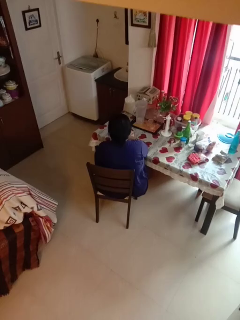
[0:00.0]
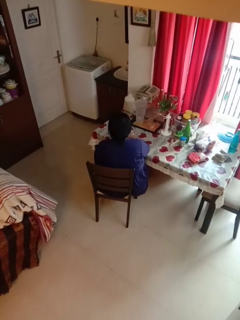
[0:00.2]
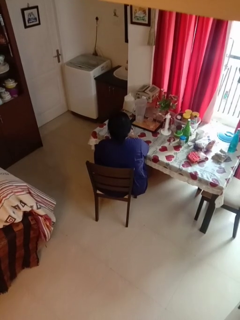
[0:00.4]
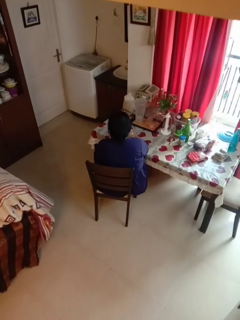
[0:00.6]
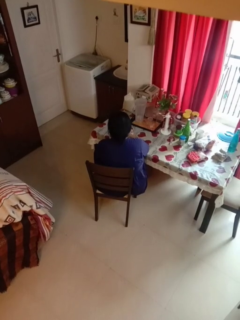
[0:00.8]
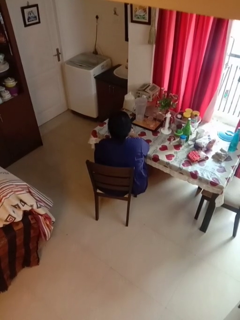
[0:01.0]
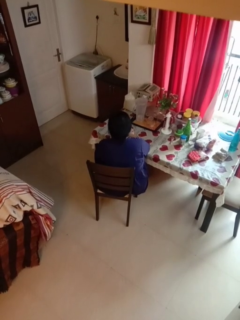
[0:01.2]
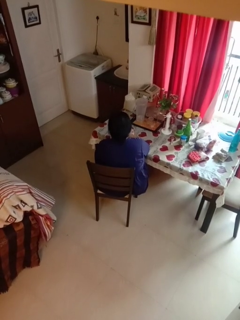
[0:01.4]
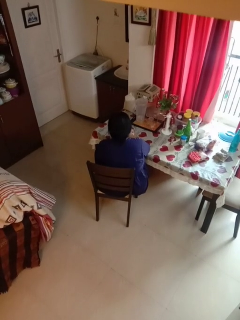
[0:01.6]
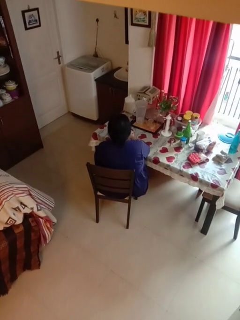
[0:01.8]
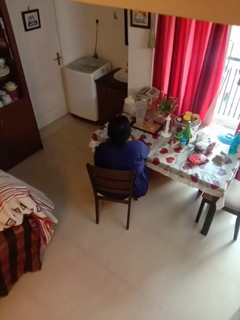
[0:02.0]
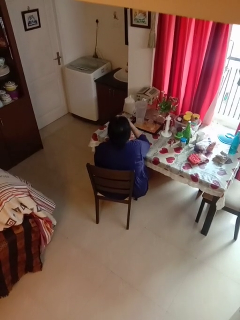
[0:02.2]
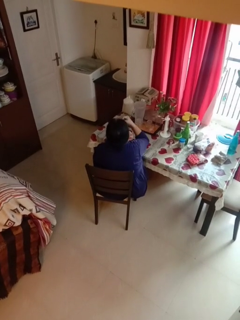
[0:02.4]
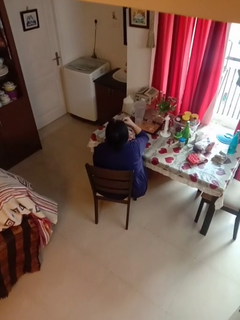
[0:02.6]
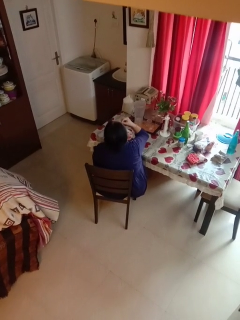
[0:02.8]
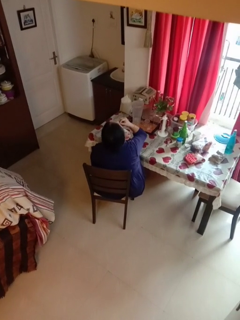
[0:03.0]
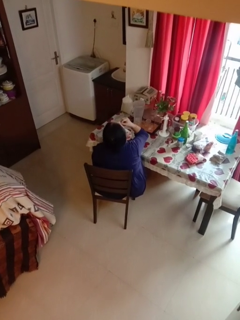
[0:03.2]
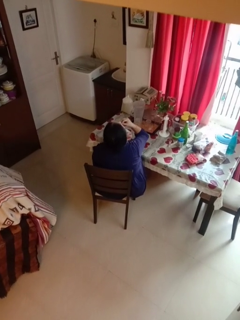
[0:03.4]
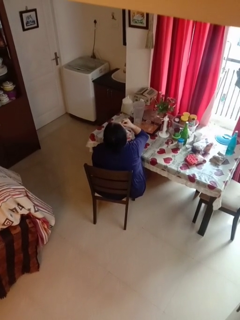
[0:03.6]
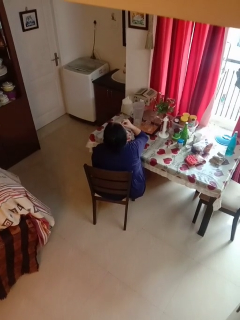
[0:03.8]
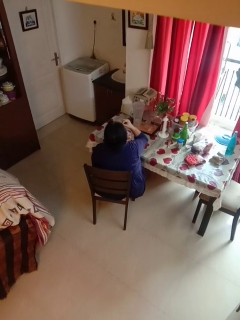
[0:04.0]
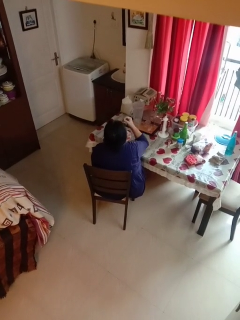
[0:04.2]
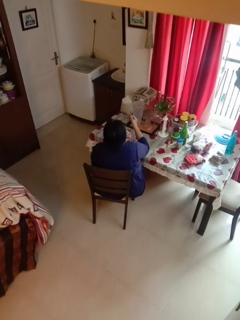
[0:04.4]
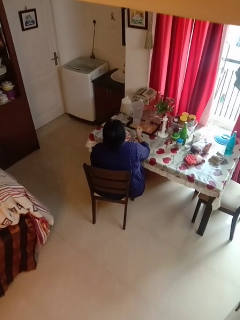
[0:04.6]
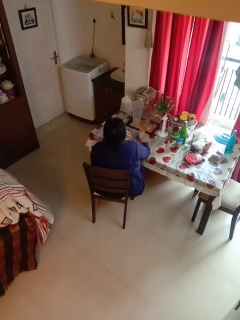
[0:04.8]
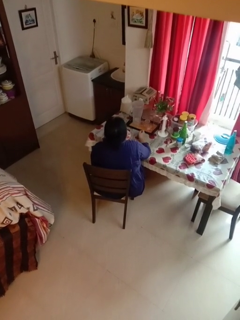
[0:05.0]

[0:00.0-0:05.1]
person eats with hands

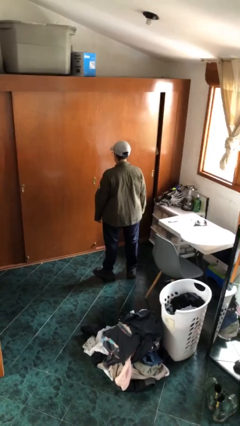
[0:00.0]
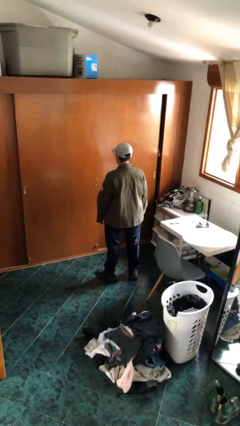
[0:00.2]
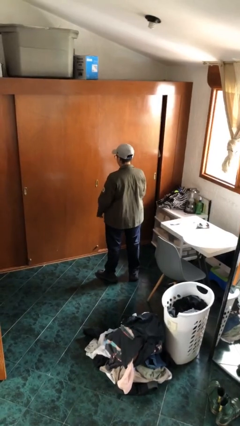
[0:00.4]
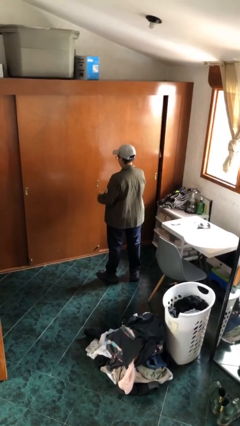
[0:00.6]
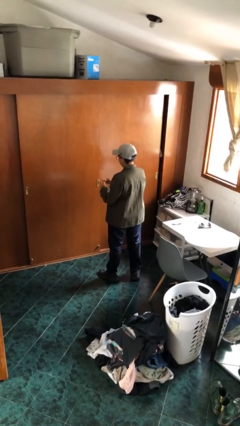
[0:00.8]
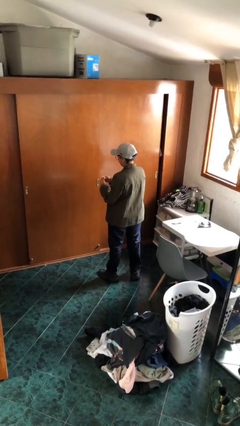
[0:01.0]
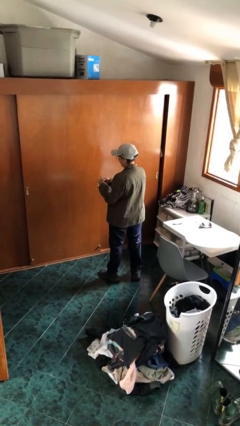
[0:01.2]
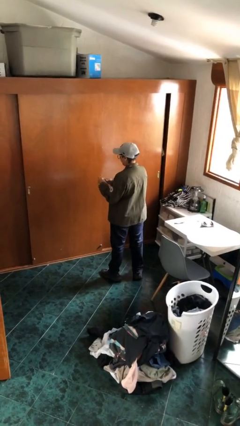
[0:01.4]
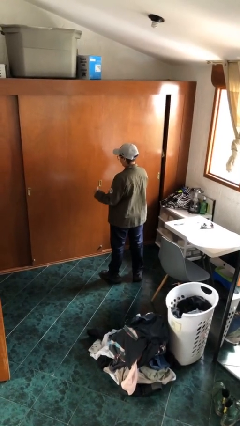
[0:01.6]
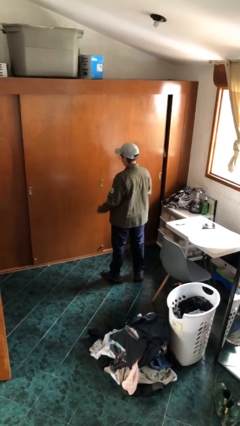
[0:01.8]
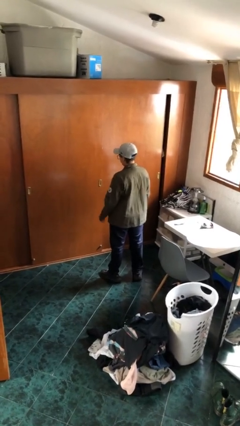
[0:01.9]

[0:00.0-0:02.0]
person puts on ring

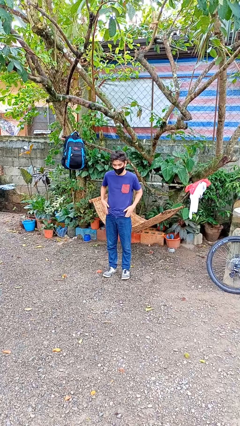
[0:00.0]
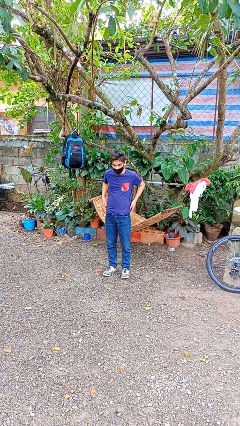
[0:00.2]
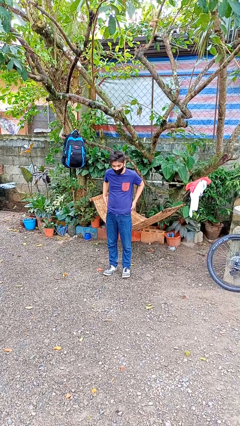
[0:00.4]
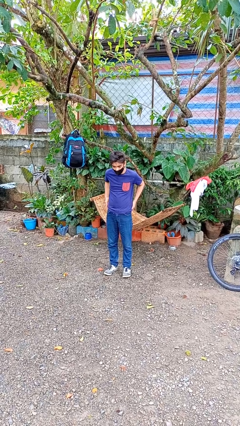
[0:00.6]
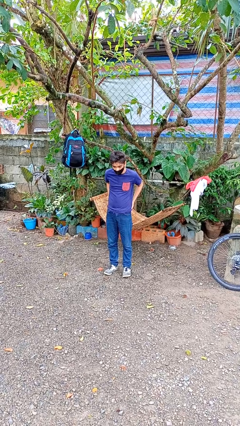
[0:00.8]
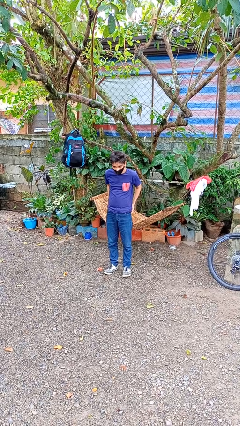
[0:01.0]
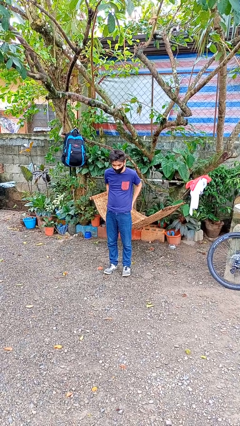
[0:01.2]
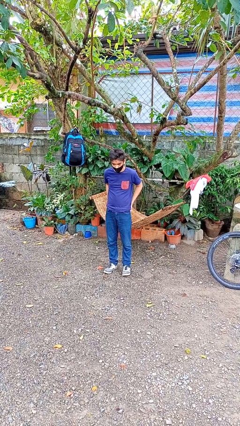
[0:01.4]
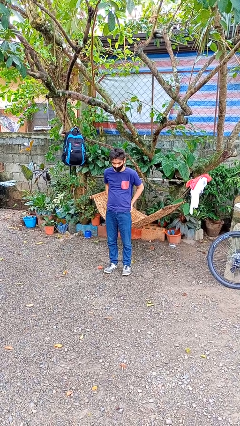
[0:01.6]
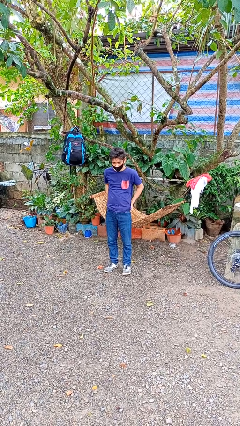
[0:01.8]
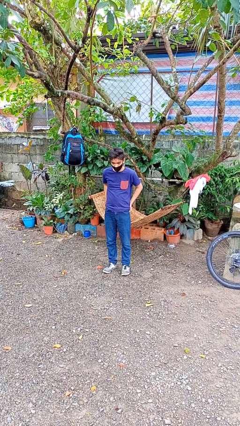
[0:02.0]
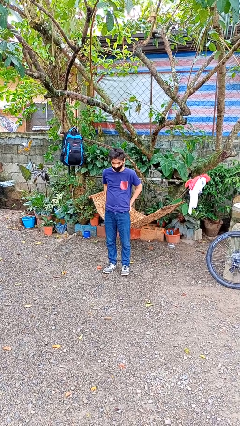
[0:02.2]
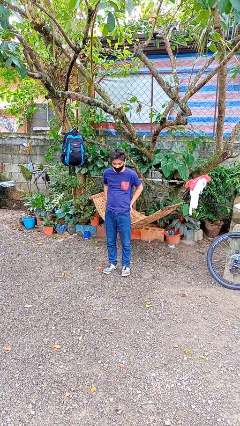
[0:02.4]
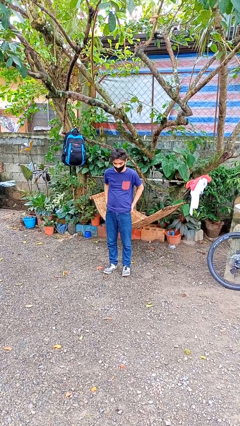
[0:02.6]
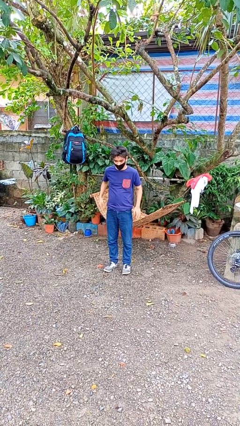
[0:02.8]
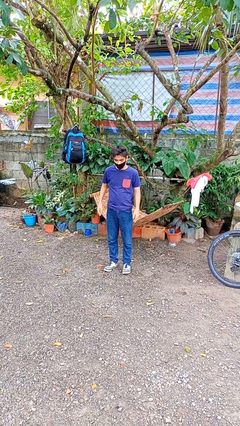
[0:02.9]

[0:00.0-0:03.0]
person puts hands in back pockets

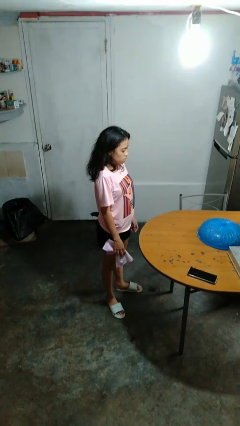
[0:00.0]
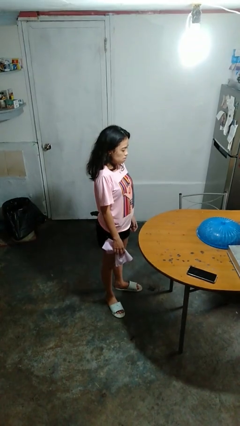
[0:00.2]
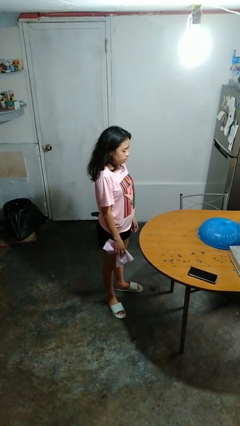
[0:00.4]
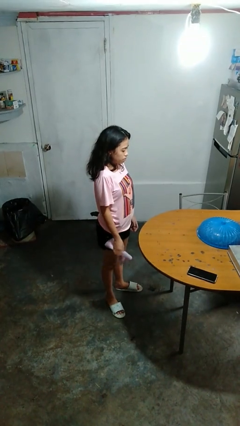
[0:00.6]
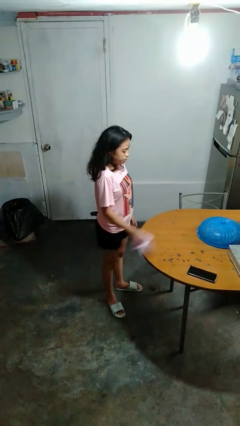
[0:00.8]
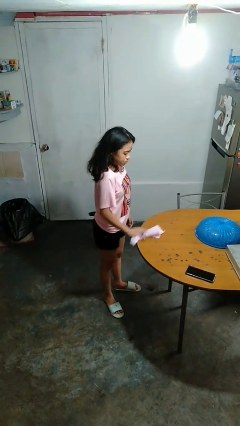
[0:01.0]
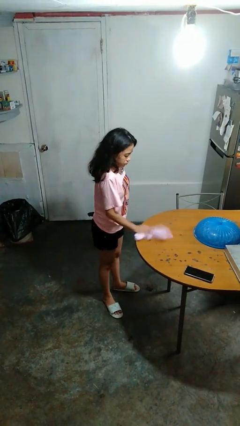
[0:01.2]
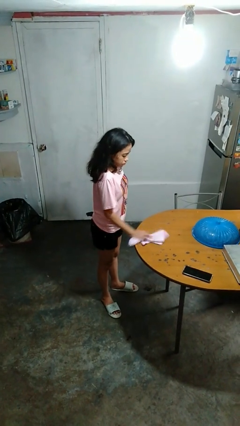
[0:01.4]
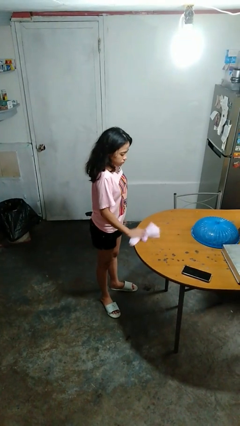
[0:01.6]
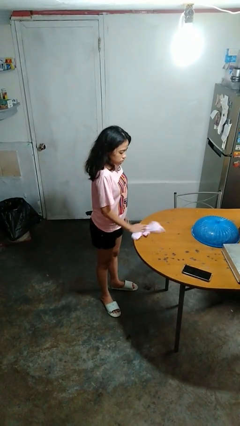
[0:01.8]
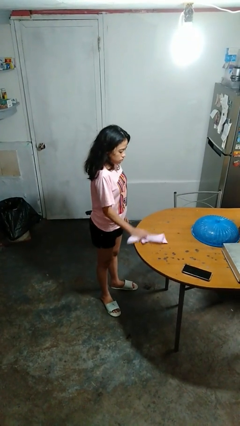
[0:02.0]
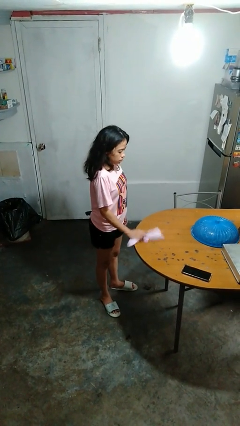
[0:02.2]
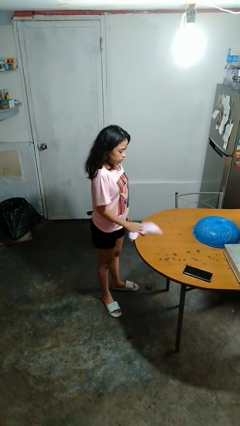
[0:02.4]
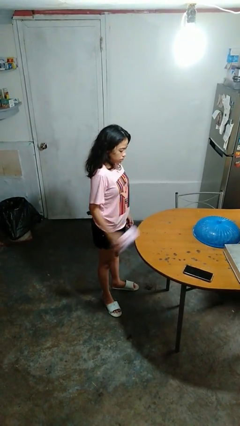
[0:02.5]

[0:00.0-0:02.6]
person cleans table with rag

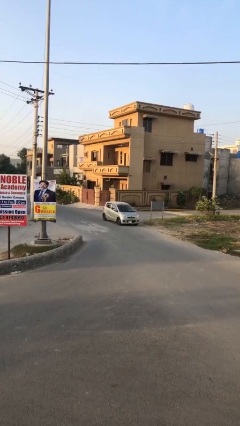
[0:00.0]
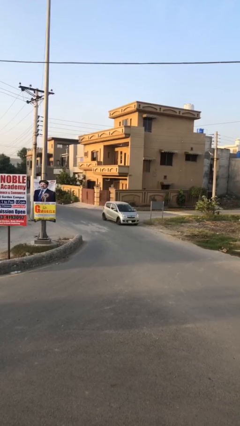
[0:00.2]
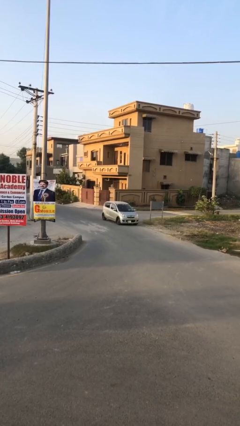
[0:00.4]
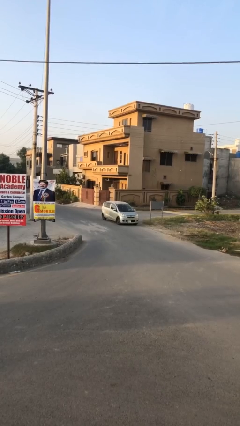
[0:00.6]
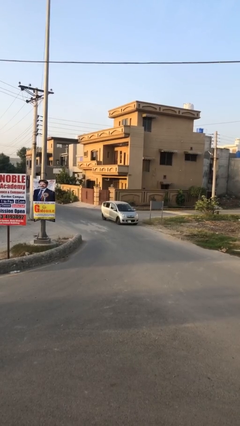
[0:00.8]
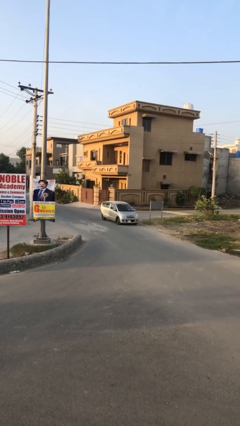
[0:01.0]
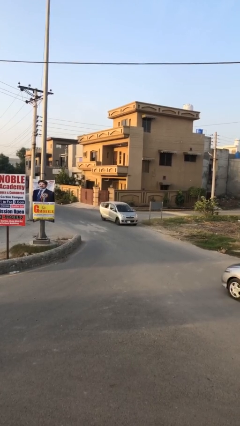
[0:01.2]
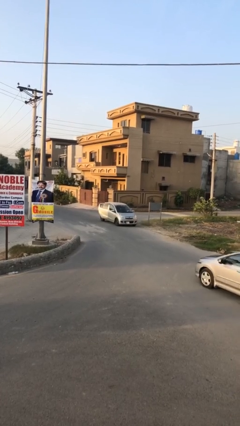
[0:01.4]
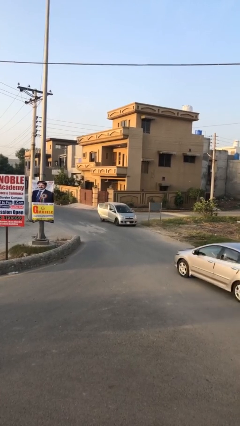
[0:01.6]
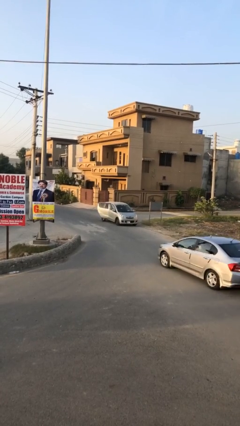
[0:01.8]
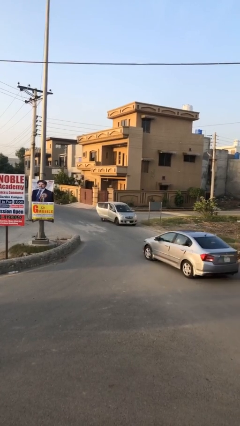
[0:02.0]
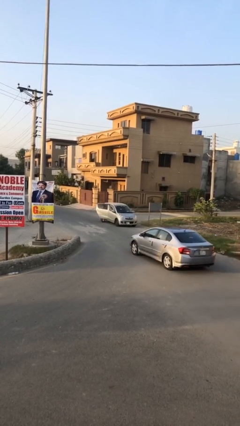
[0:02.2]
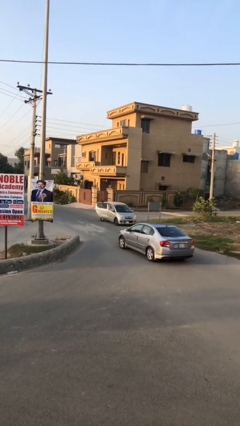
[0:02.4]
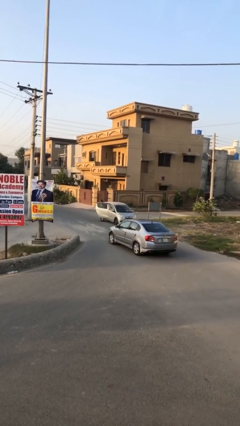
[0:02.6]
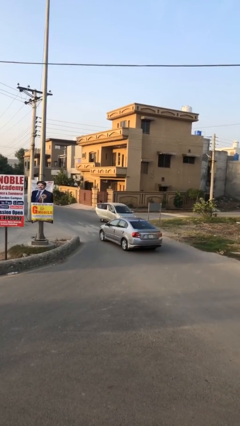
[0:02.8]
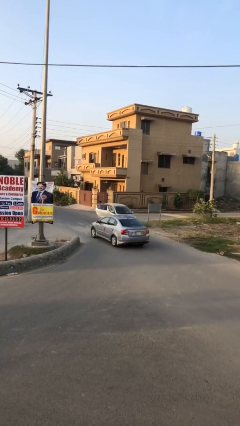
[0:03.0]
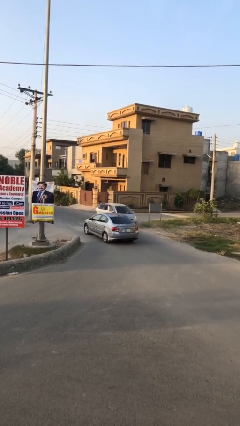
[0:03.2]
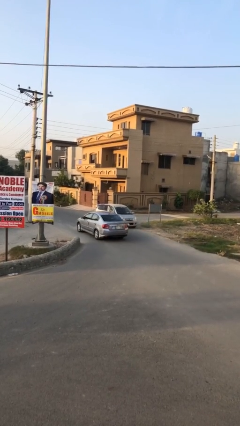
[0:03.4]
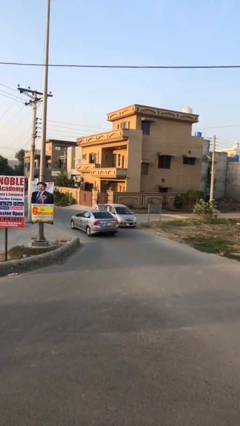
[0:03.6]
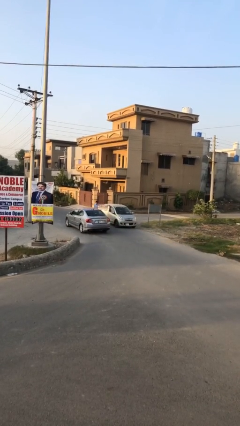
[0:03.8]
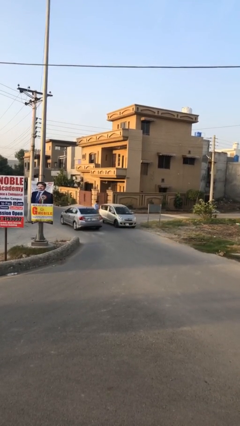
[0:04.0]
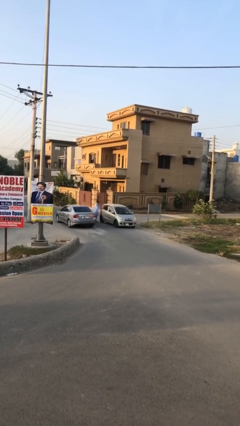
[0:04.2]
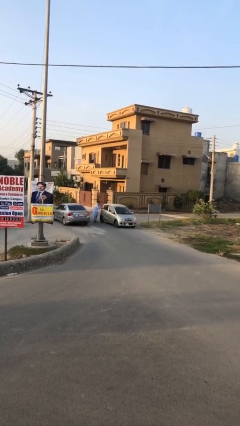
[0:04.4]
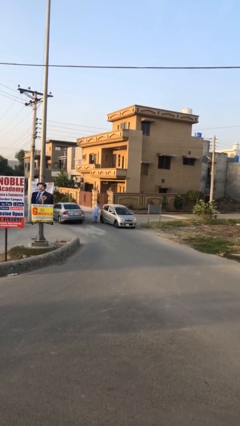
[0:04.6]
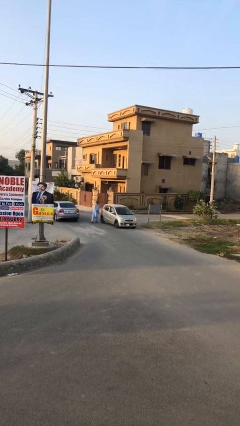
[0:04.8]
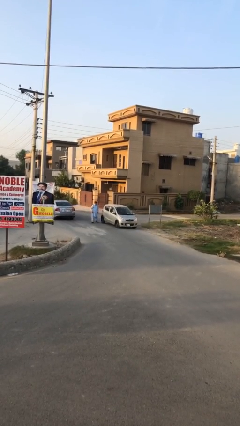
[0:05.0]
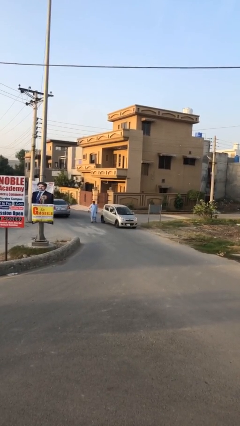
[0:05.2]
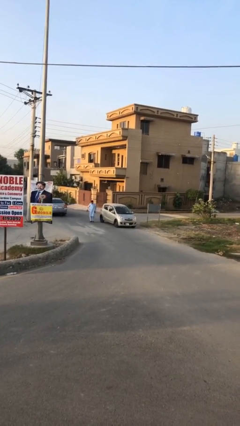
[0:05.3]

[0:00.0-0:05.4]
car drops off person

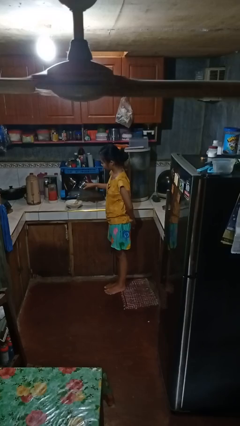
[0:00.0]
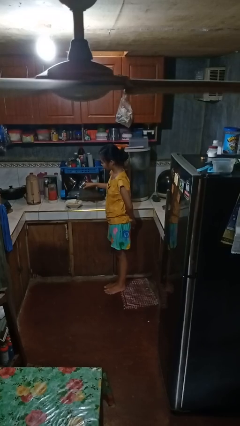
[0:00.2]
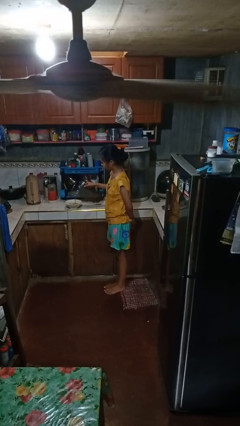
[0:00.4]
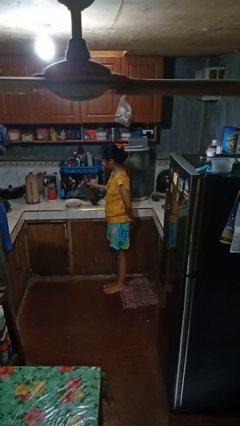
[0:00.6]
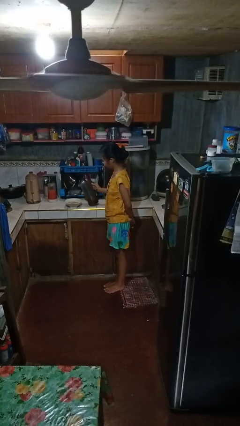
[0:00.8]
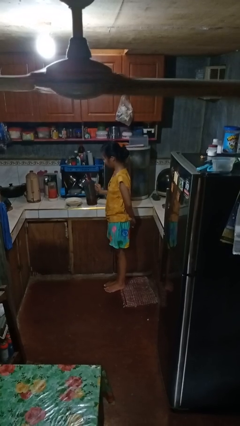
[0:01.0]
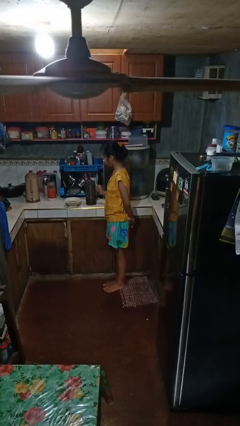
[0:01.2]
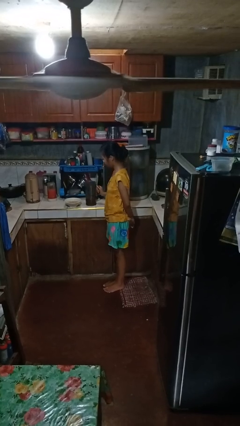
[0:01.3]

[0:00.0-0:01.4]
person pours into bowl
